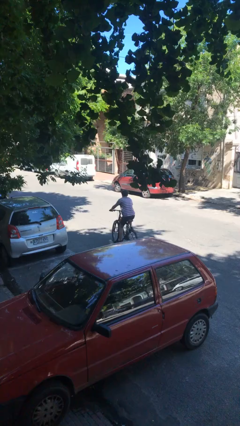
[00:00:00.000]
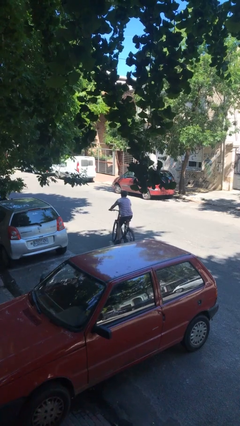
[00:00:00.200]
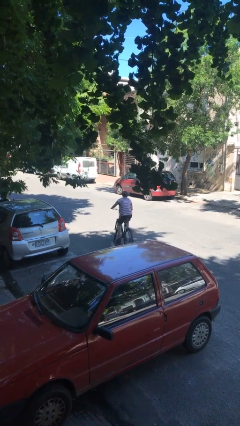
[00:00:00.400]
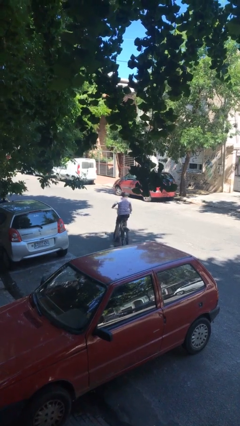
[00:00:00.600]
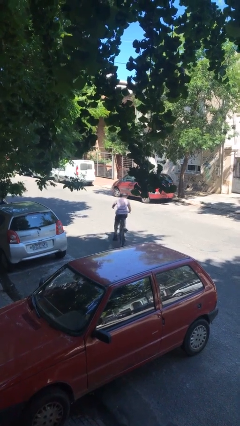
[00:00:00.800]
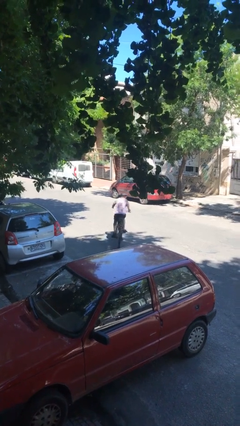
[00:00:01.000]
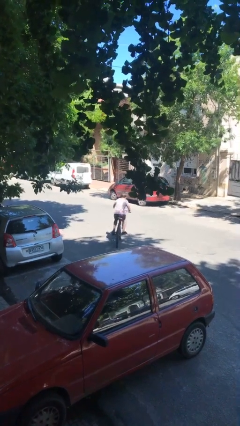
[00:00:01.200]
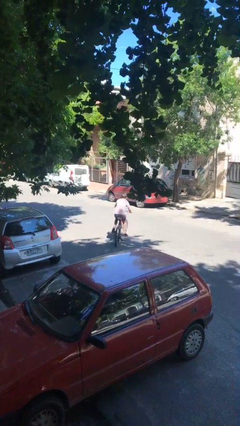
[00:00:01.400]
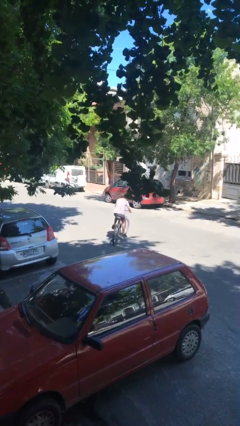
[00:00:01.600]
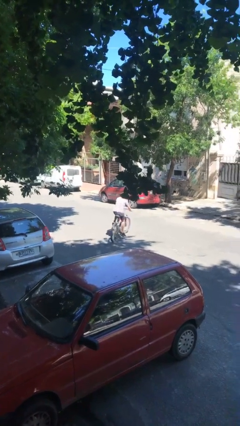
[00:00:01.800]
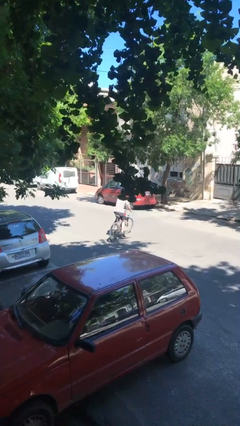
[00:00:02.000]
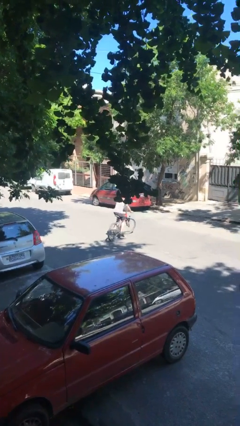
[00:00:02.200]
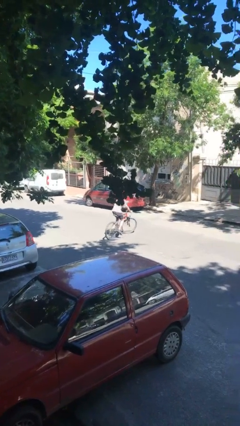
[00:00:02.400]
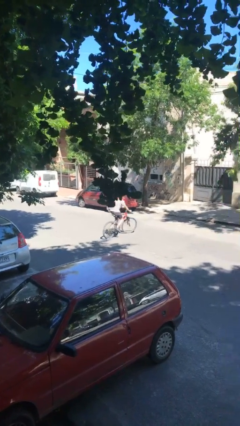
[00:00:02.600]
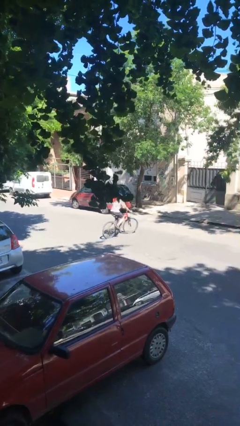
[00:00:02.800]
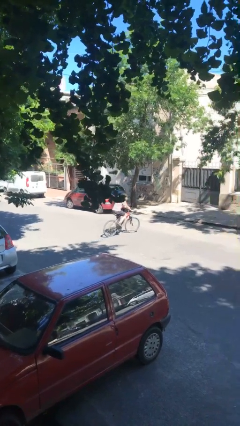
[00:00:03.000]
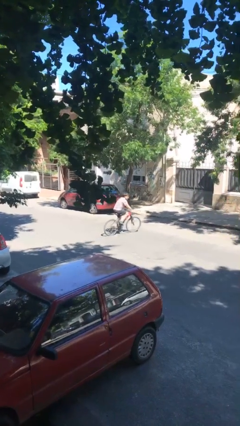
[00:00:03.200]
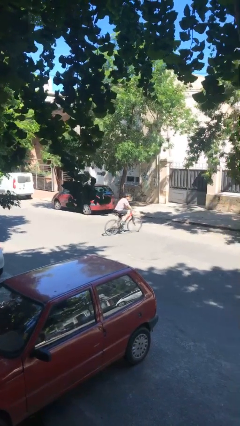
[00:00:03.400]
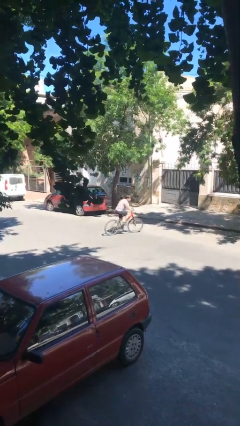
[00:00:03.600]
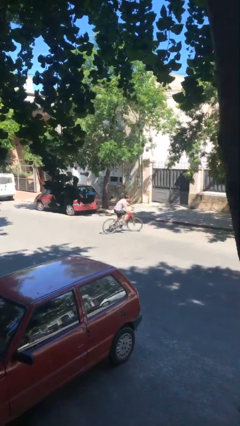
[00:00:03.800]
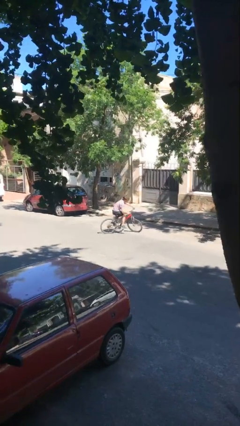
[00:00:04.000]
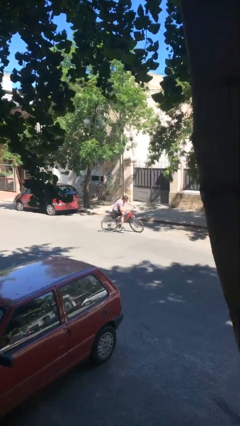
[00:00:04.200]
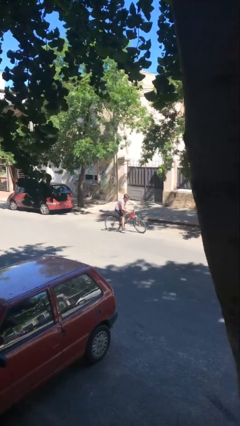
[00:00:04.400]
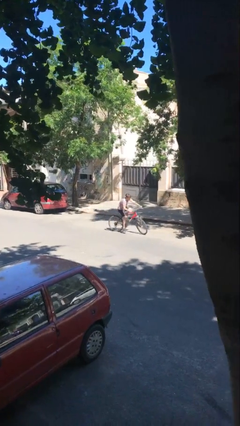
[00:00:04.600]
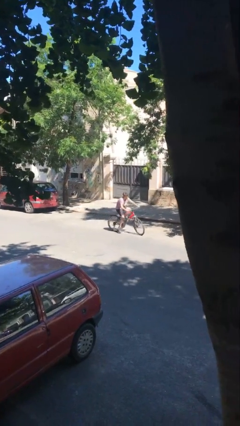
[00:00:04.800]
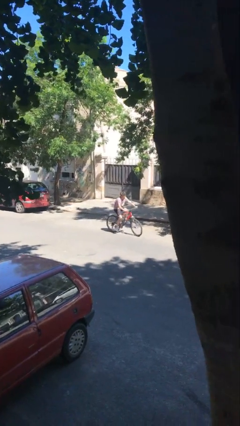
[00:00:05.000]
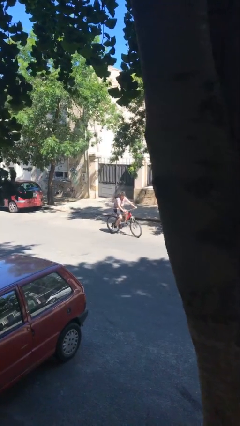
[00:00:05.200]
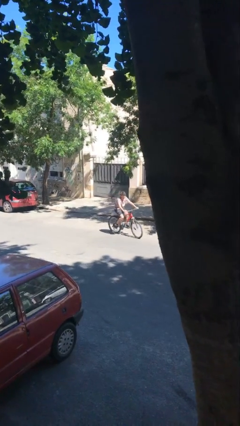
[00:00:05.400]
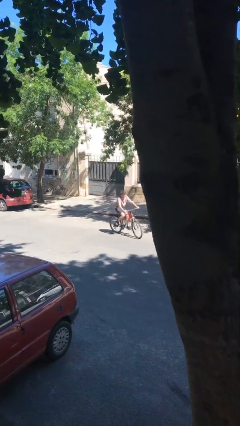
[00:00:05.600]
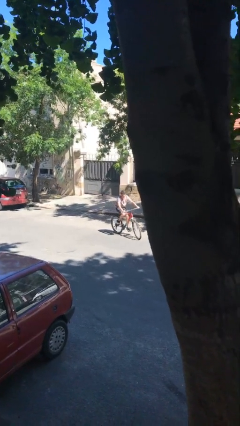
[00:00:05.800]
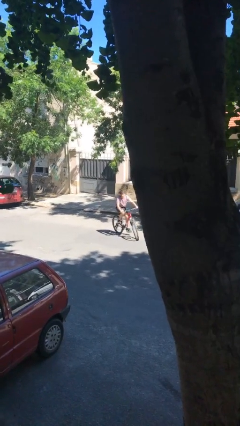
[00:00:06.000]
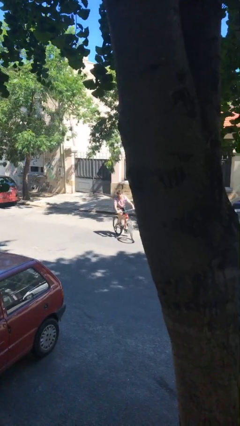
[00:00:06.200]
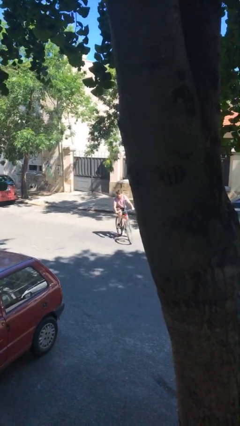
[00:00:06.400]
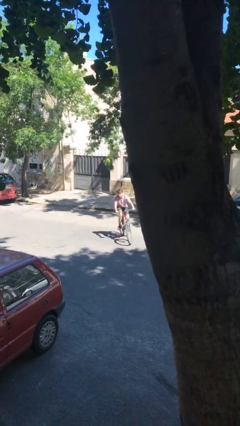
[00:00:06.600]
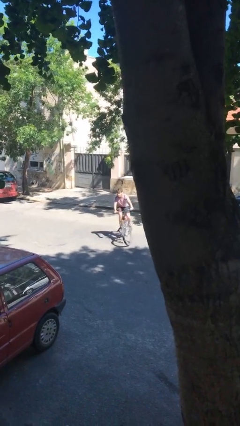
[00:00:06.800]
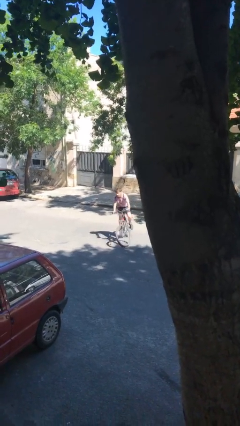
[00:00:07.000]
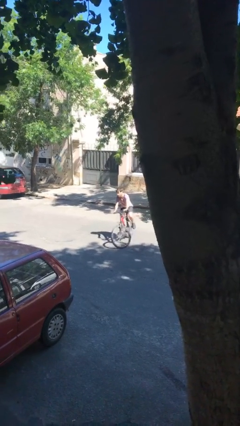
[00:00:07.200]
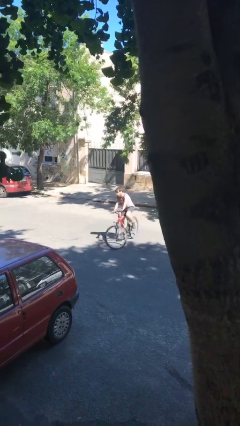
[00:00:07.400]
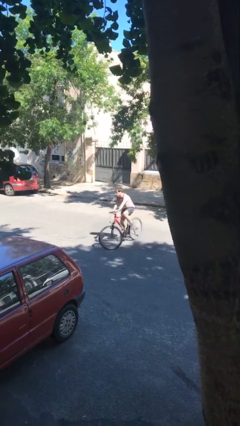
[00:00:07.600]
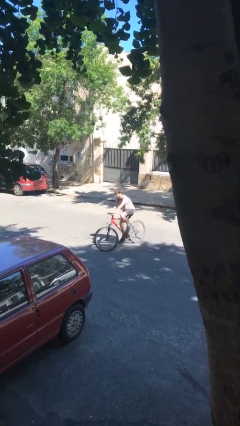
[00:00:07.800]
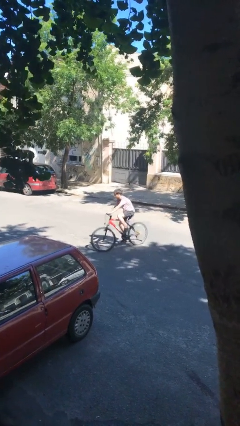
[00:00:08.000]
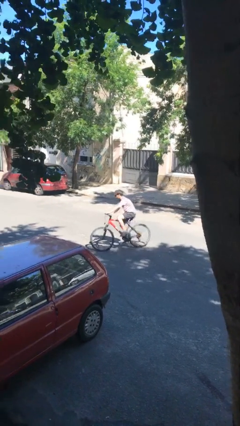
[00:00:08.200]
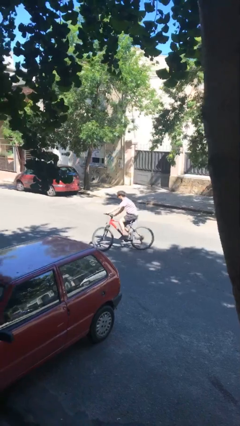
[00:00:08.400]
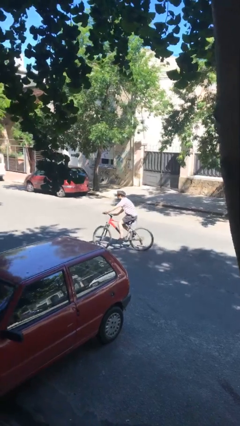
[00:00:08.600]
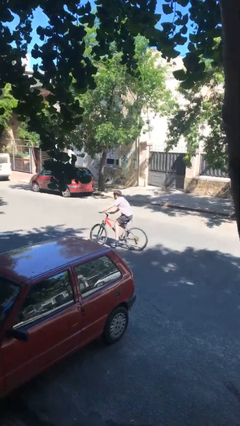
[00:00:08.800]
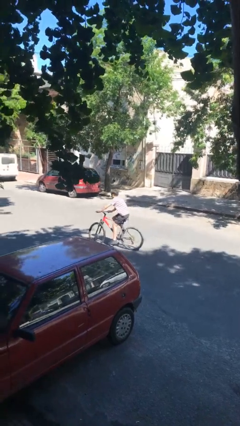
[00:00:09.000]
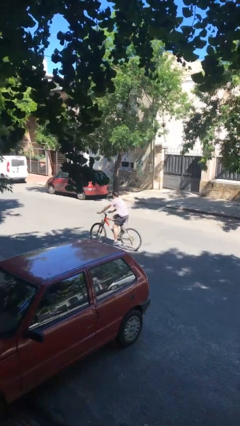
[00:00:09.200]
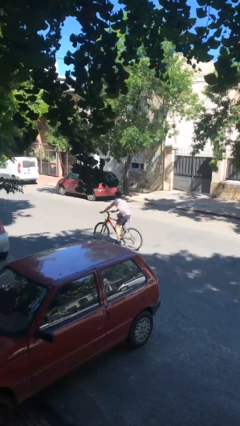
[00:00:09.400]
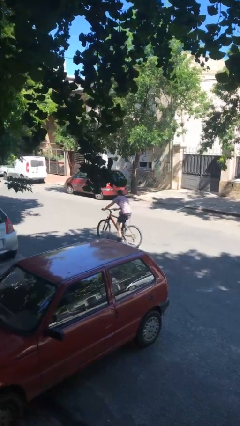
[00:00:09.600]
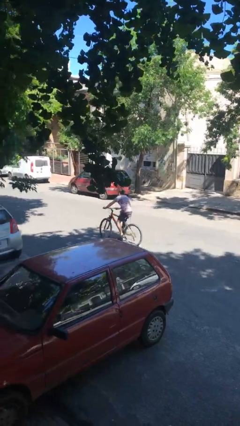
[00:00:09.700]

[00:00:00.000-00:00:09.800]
person rides bicycle

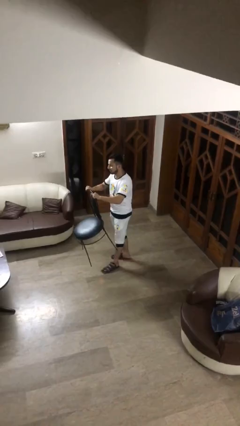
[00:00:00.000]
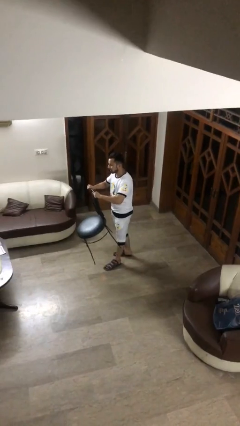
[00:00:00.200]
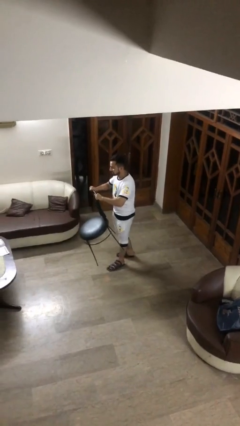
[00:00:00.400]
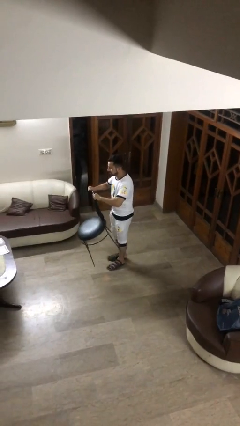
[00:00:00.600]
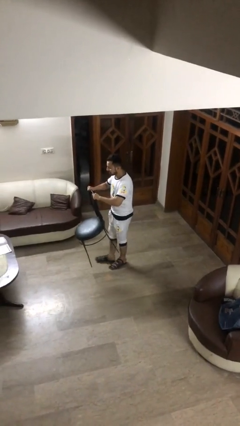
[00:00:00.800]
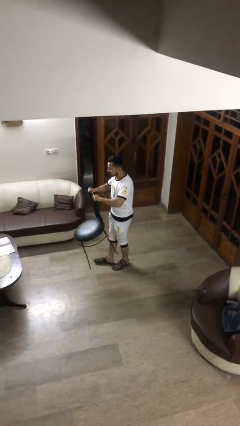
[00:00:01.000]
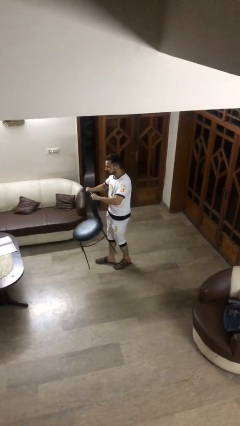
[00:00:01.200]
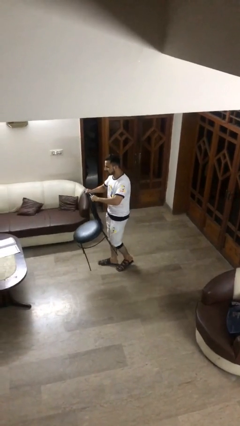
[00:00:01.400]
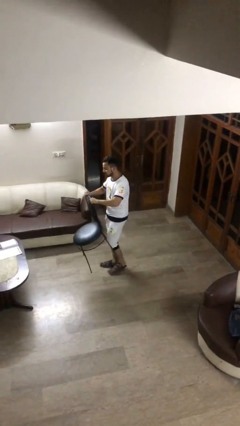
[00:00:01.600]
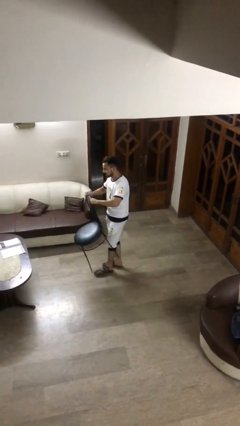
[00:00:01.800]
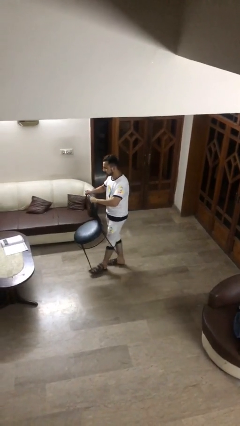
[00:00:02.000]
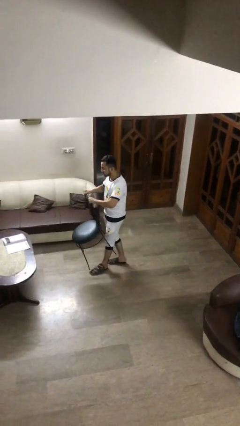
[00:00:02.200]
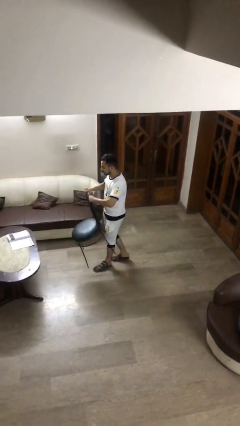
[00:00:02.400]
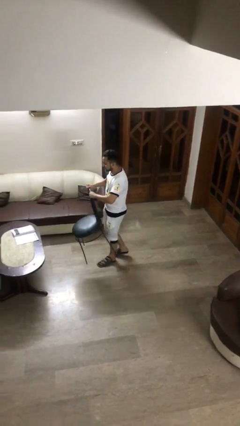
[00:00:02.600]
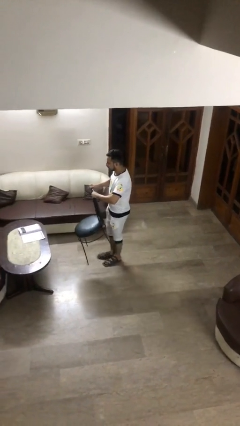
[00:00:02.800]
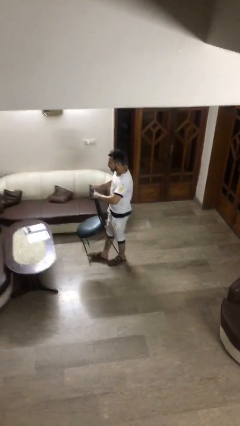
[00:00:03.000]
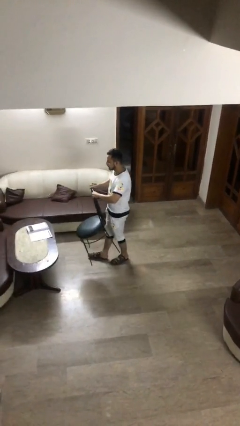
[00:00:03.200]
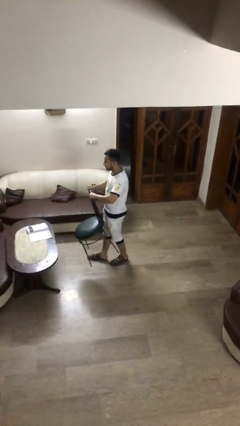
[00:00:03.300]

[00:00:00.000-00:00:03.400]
person carries heavy object

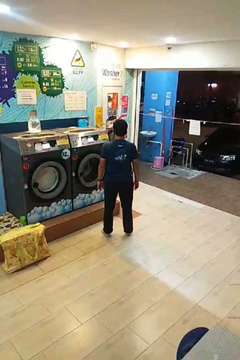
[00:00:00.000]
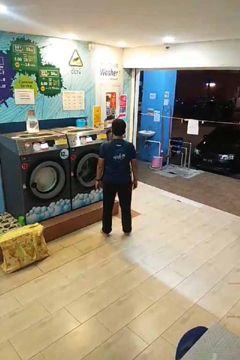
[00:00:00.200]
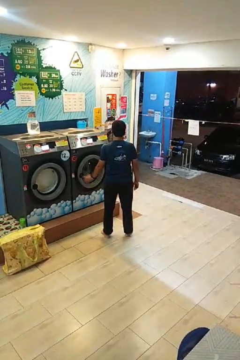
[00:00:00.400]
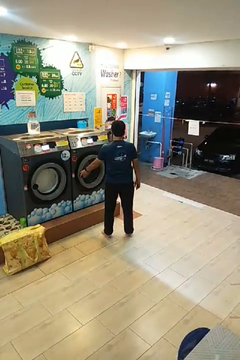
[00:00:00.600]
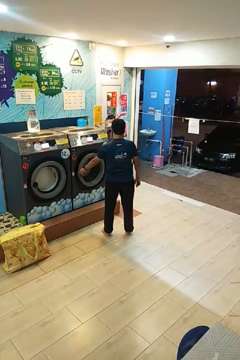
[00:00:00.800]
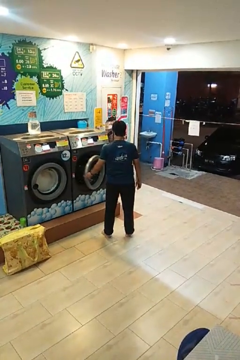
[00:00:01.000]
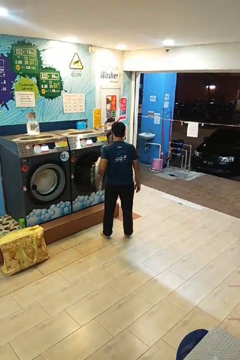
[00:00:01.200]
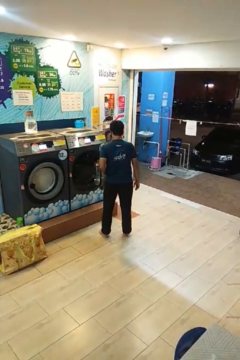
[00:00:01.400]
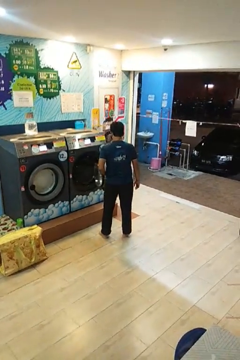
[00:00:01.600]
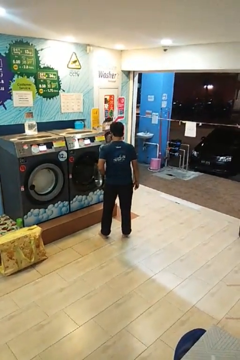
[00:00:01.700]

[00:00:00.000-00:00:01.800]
person opens clothes washer

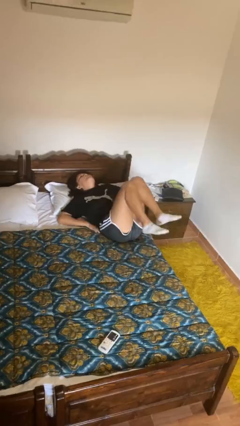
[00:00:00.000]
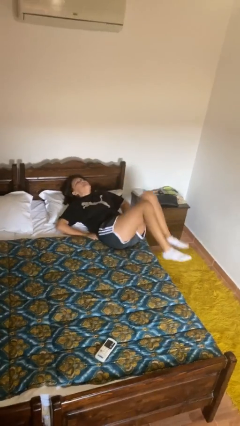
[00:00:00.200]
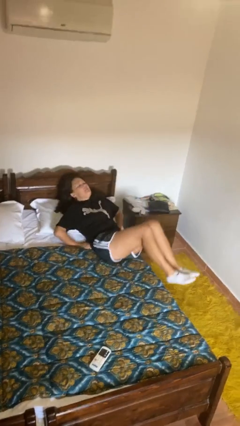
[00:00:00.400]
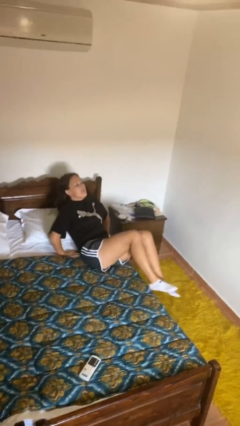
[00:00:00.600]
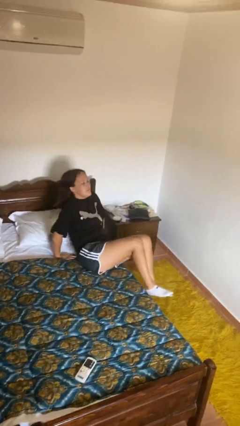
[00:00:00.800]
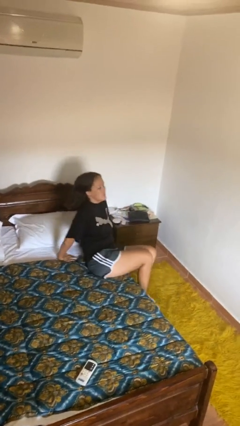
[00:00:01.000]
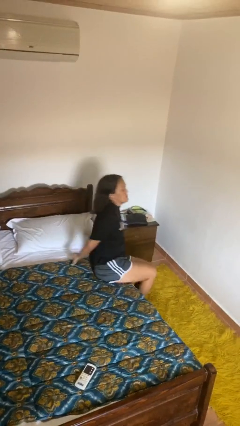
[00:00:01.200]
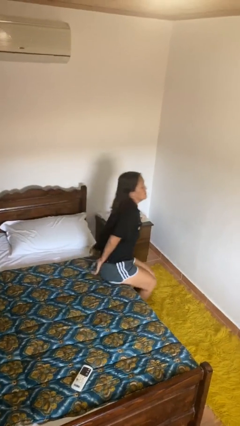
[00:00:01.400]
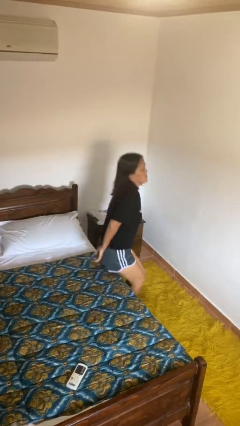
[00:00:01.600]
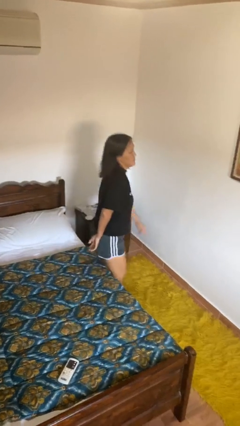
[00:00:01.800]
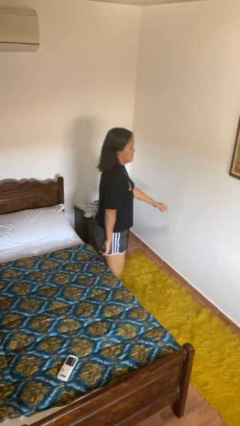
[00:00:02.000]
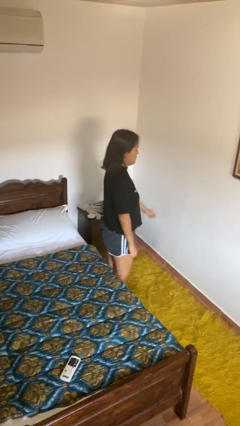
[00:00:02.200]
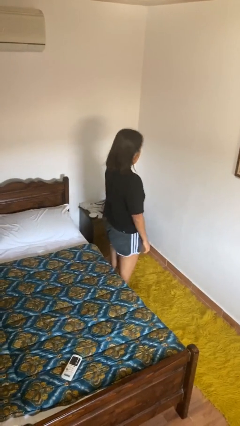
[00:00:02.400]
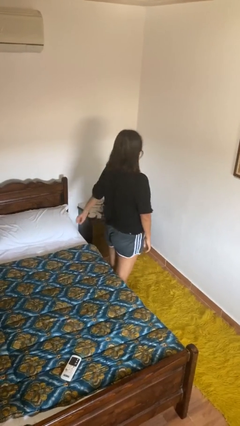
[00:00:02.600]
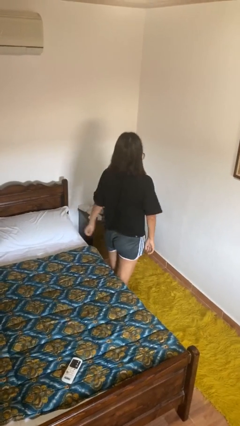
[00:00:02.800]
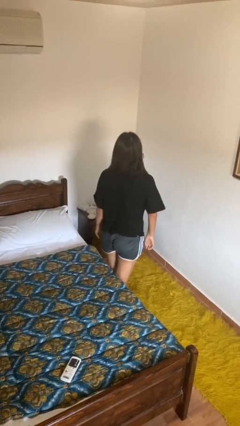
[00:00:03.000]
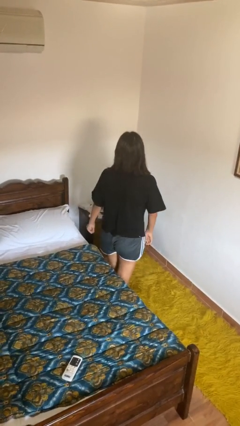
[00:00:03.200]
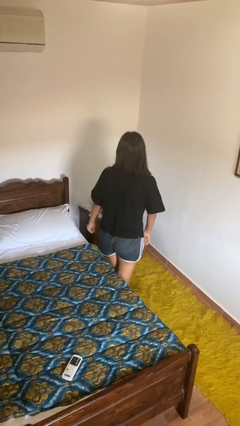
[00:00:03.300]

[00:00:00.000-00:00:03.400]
person stands up
